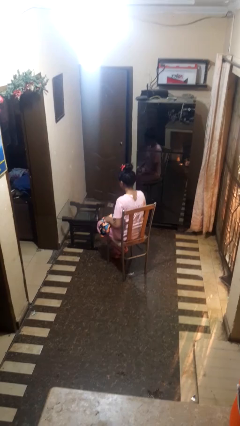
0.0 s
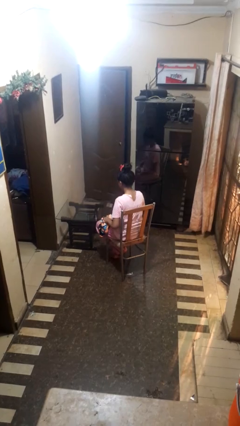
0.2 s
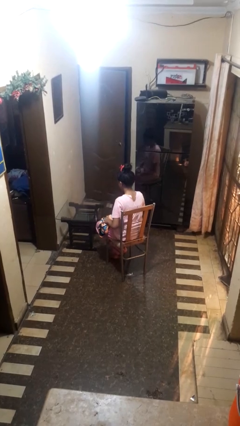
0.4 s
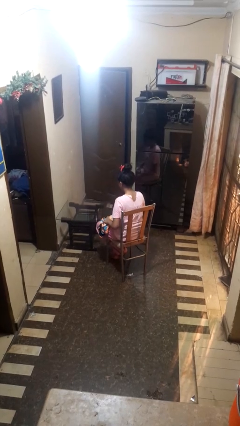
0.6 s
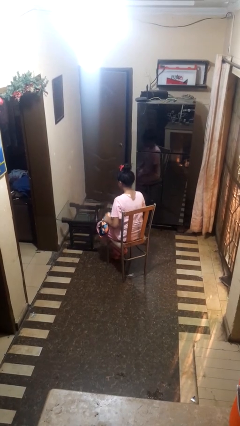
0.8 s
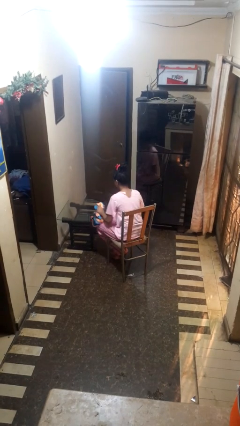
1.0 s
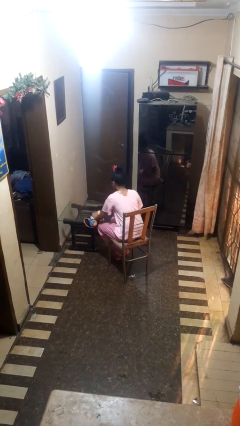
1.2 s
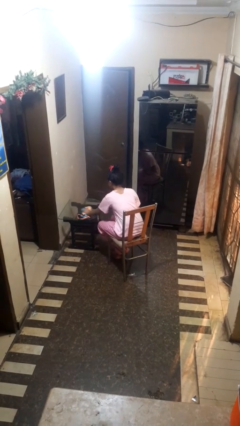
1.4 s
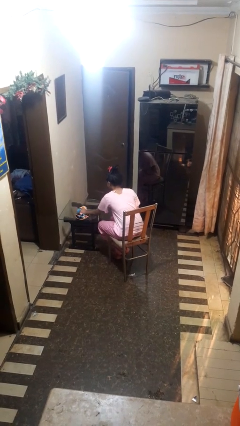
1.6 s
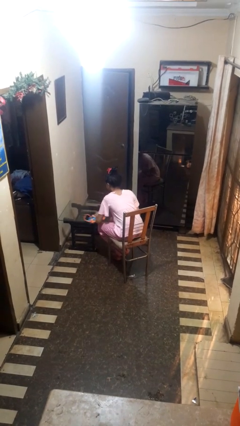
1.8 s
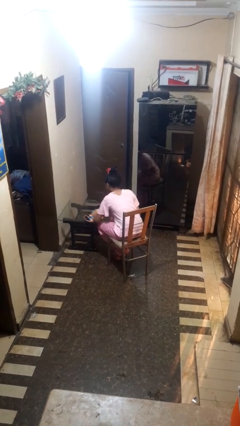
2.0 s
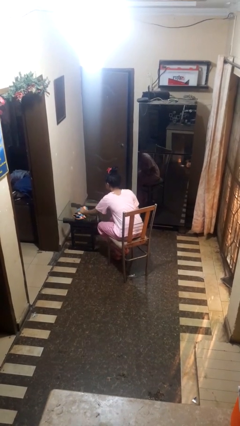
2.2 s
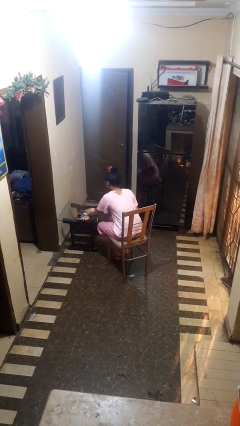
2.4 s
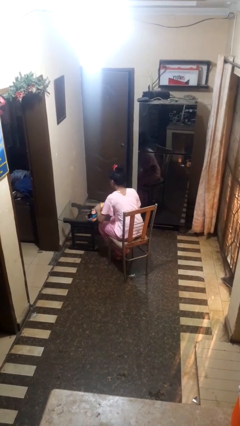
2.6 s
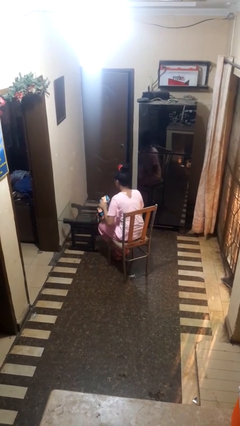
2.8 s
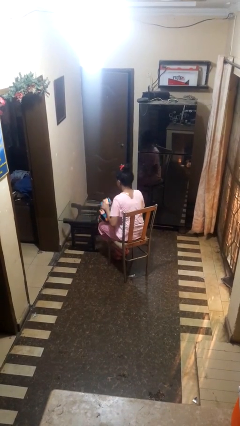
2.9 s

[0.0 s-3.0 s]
person cleans table with rag

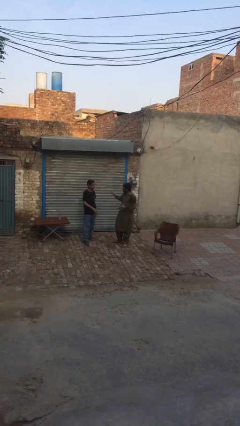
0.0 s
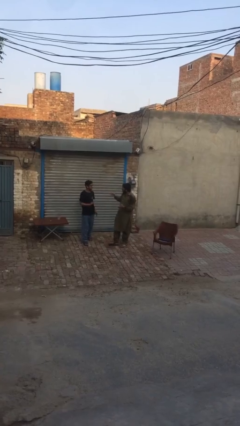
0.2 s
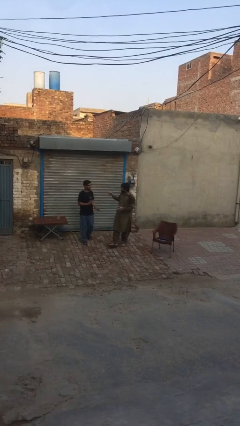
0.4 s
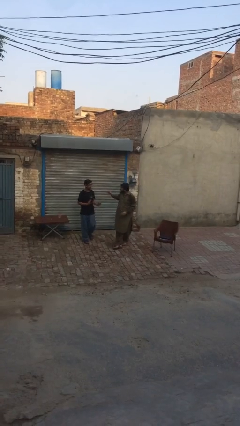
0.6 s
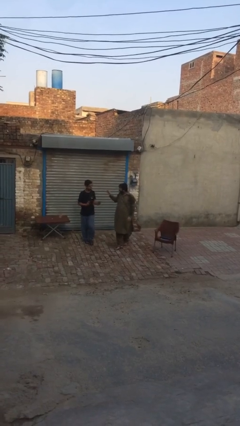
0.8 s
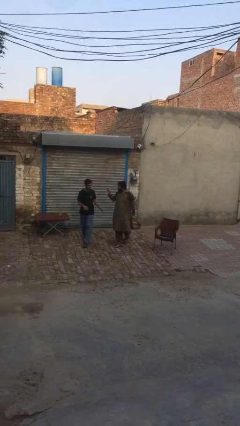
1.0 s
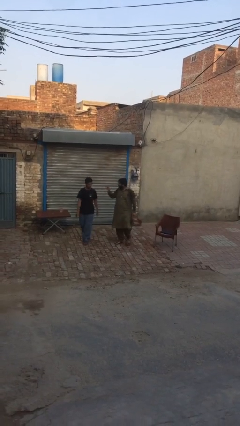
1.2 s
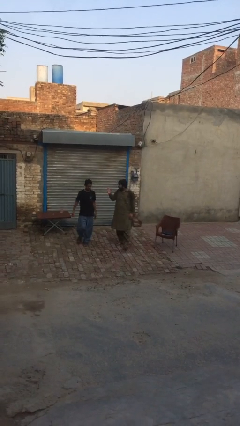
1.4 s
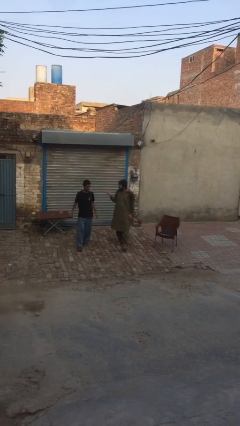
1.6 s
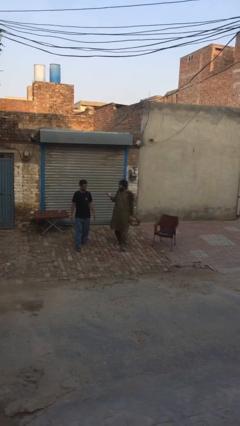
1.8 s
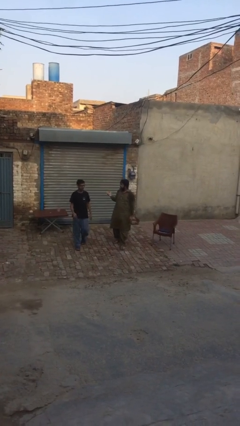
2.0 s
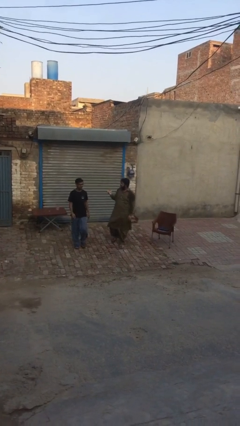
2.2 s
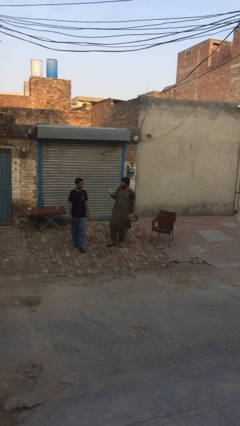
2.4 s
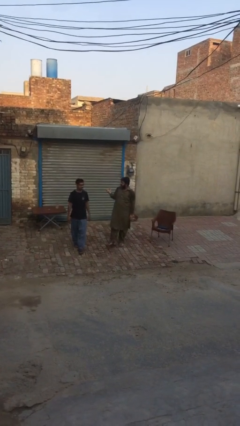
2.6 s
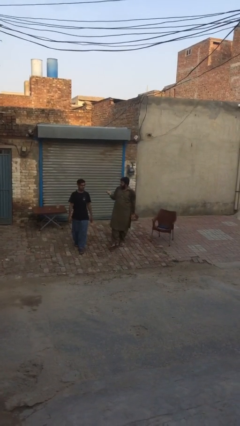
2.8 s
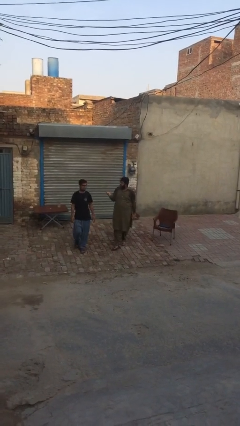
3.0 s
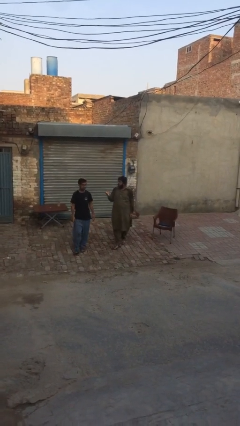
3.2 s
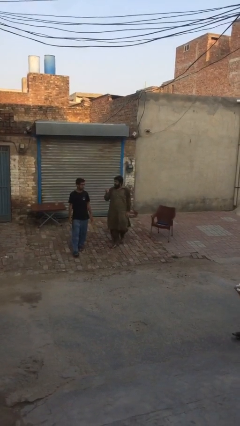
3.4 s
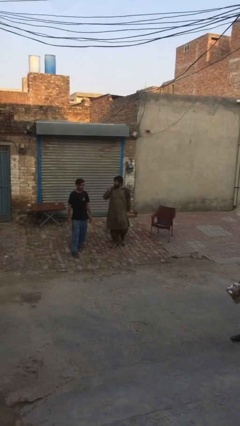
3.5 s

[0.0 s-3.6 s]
person talks to person

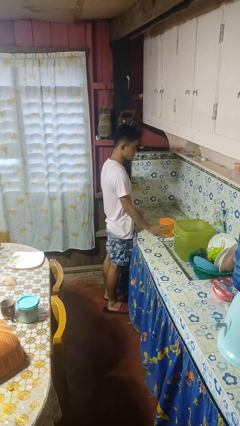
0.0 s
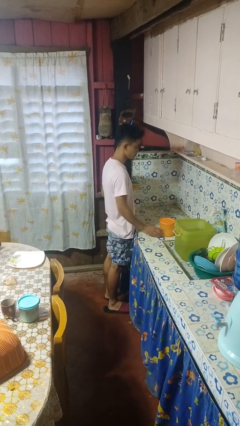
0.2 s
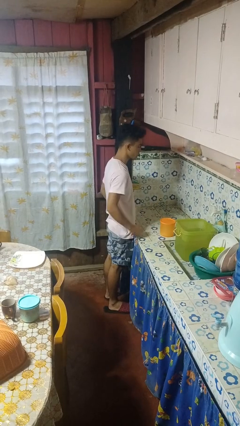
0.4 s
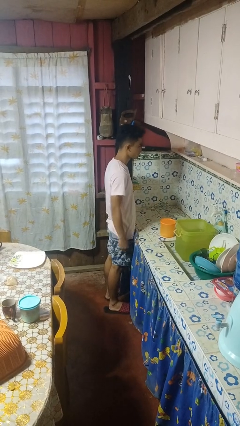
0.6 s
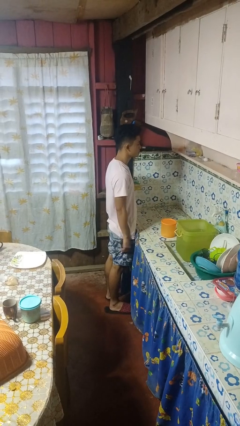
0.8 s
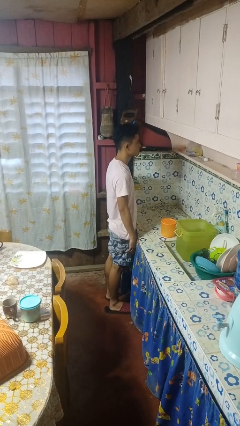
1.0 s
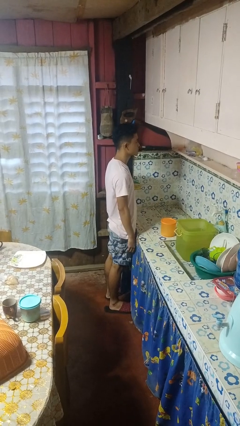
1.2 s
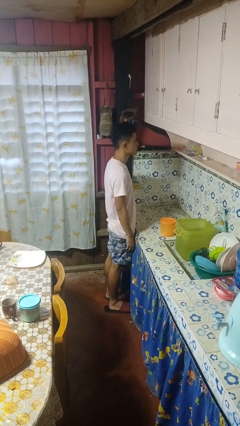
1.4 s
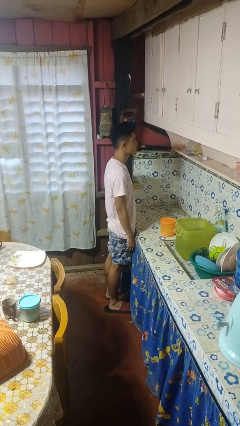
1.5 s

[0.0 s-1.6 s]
person puts down object on countertop

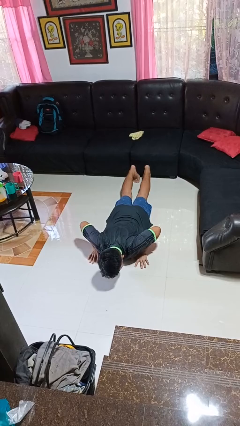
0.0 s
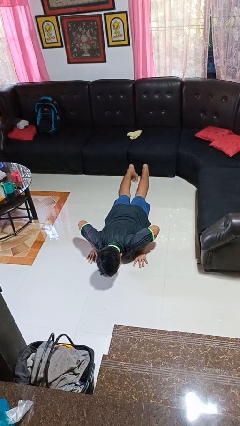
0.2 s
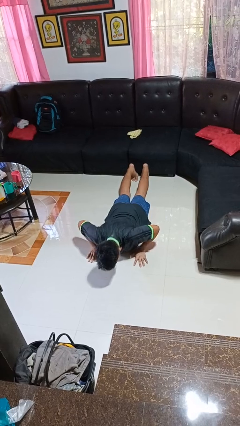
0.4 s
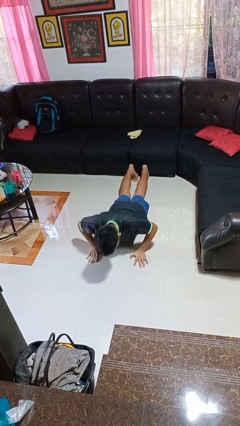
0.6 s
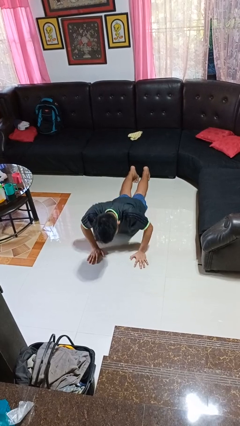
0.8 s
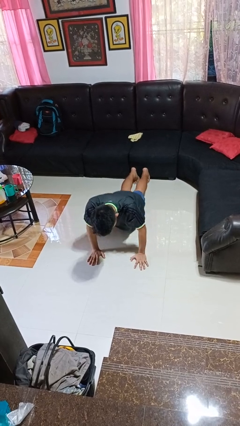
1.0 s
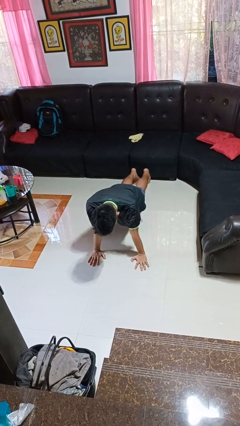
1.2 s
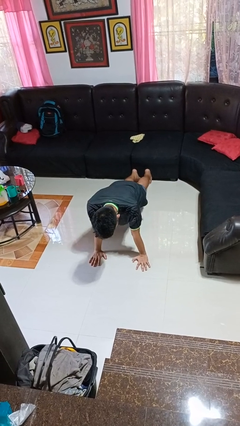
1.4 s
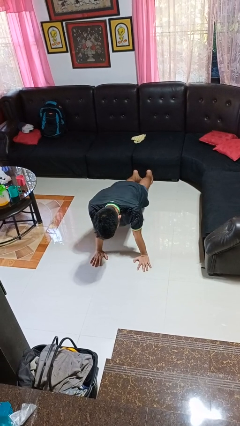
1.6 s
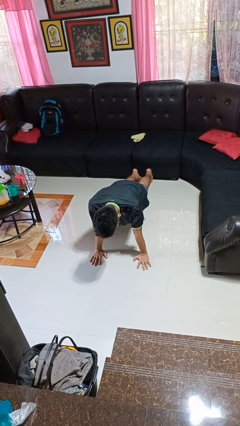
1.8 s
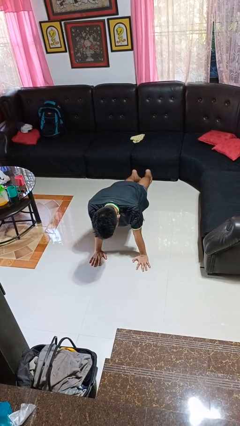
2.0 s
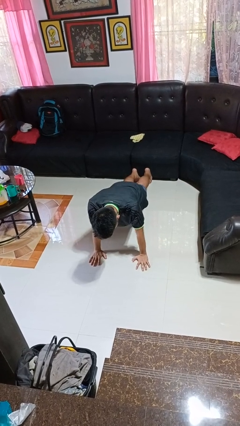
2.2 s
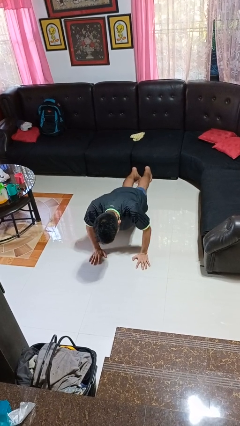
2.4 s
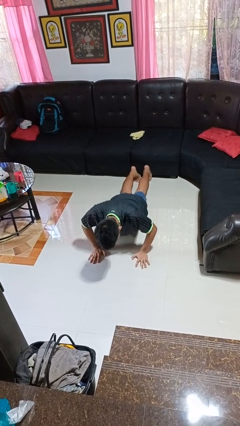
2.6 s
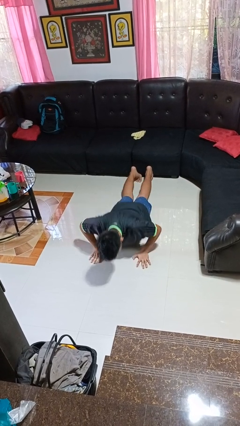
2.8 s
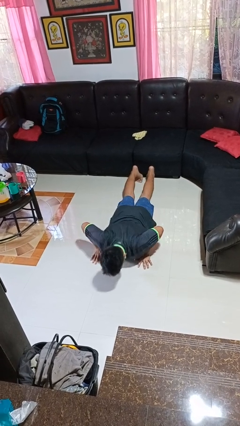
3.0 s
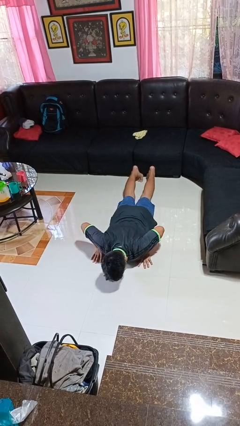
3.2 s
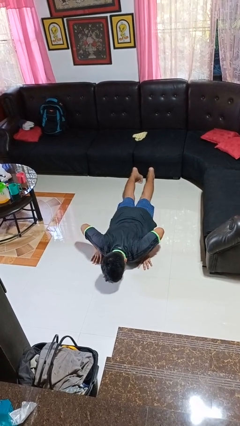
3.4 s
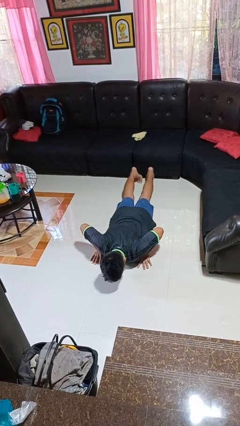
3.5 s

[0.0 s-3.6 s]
person exercises with pushup

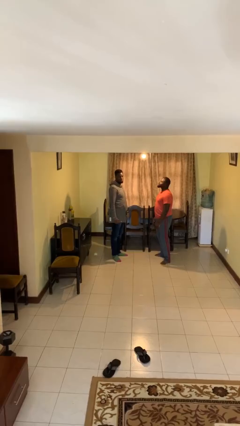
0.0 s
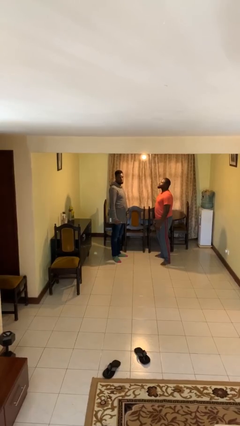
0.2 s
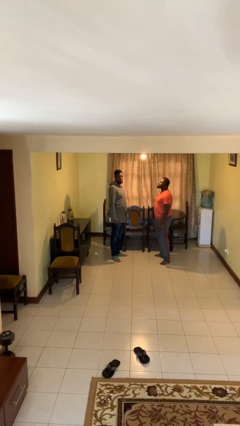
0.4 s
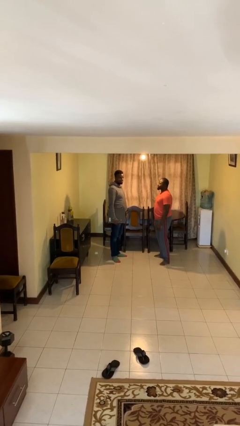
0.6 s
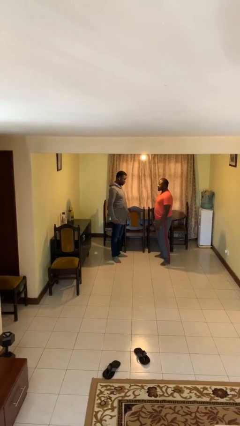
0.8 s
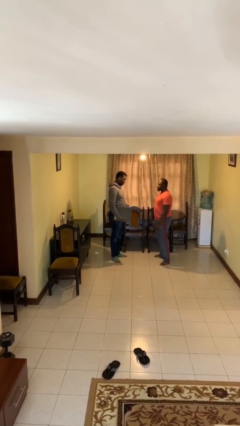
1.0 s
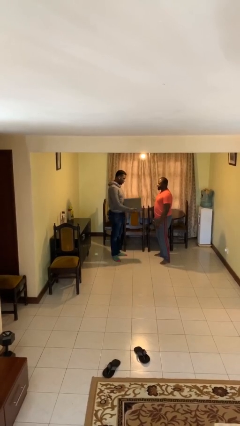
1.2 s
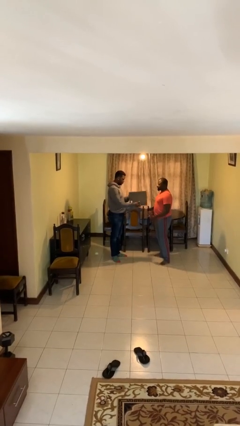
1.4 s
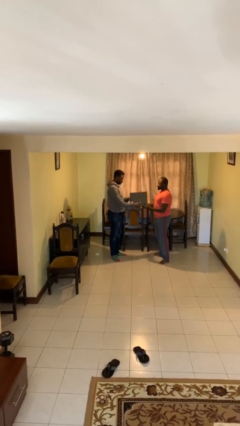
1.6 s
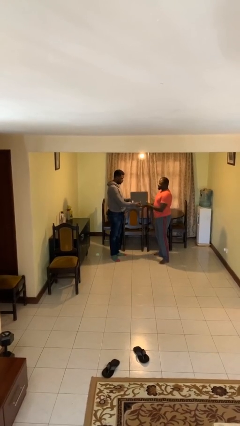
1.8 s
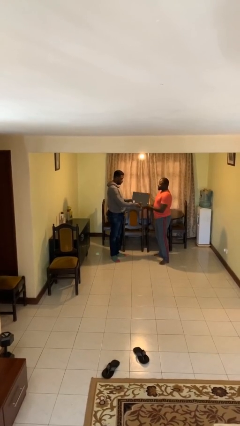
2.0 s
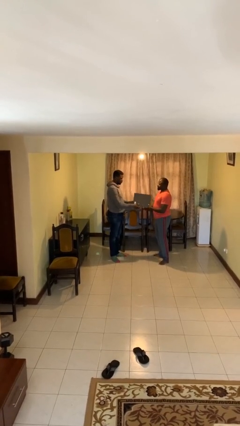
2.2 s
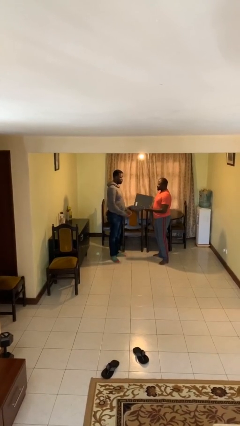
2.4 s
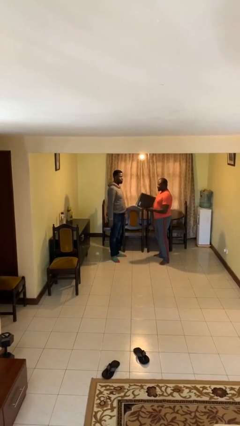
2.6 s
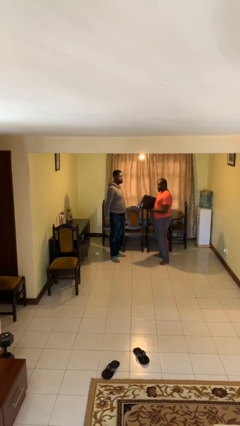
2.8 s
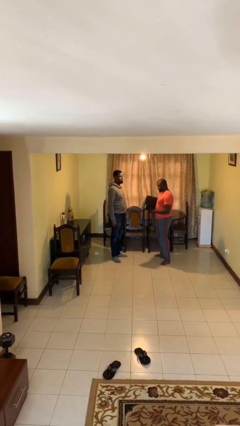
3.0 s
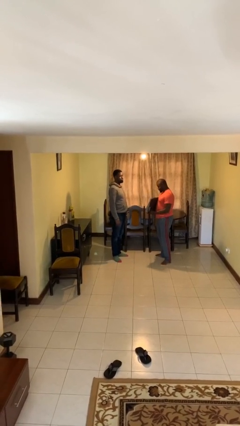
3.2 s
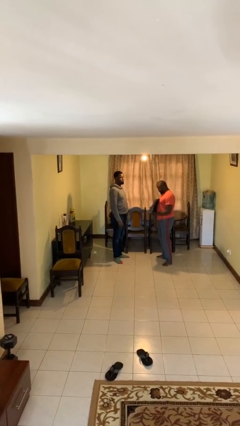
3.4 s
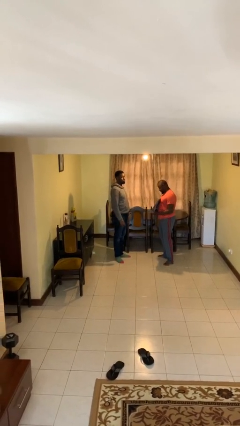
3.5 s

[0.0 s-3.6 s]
person transfers object to person

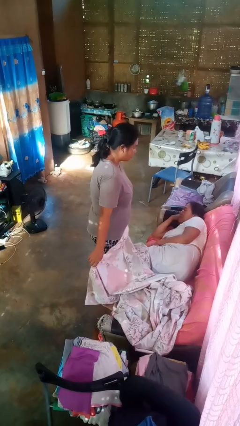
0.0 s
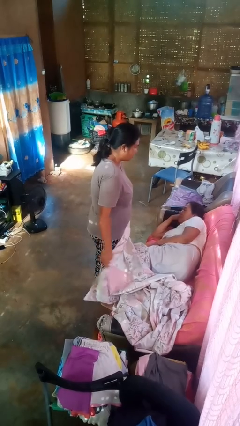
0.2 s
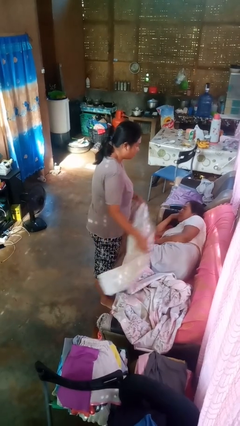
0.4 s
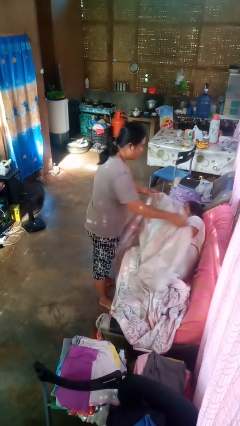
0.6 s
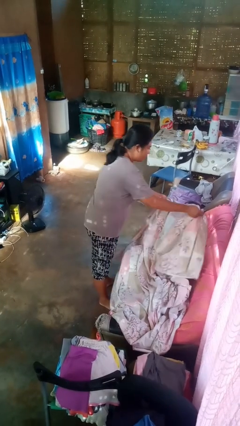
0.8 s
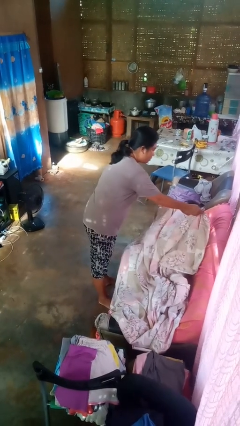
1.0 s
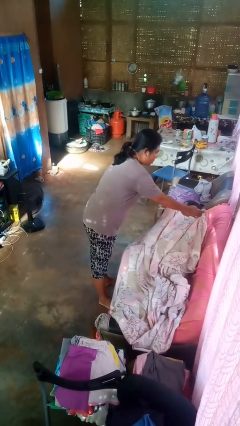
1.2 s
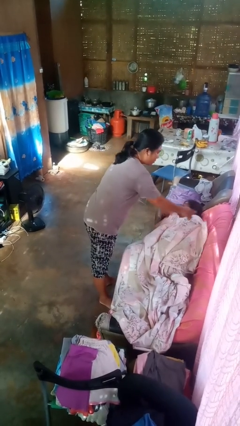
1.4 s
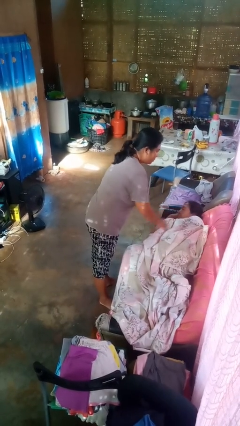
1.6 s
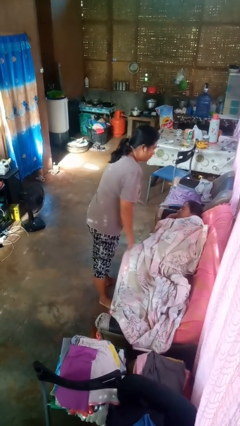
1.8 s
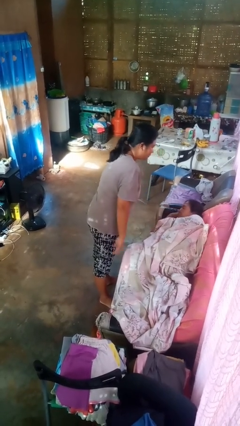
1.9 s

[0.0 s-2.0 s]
person covers friend with blanket

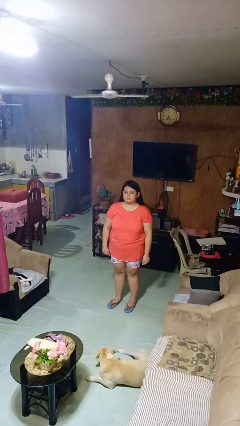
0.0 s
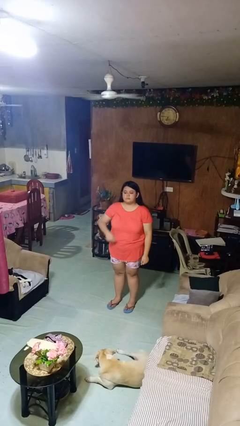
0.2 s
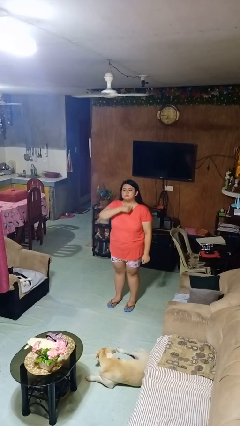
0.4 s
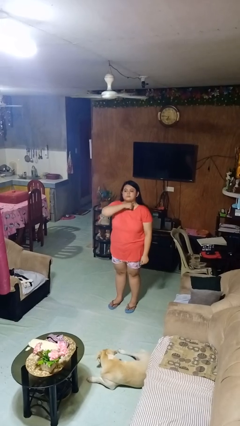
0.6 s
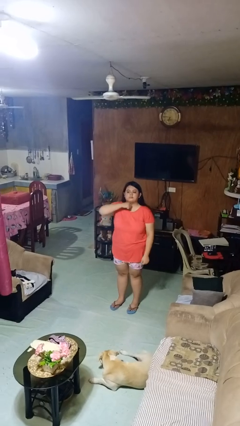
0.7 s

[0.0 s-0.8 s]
person gestures cut
